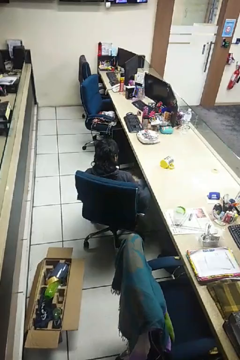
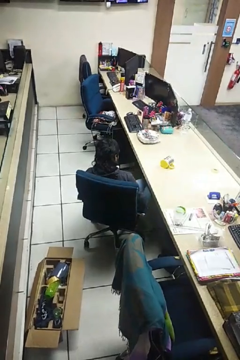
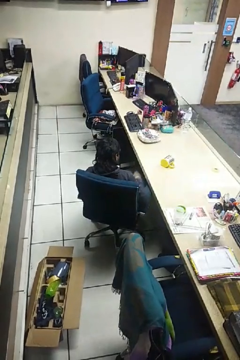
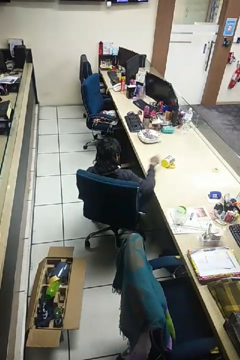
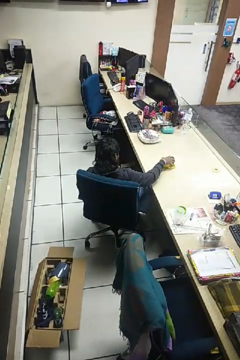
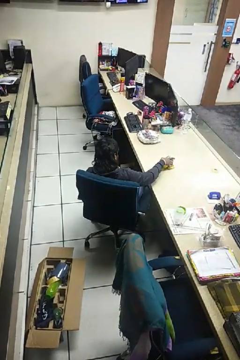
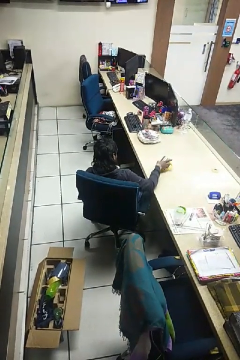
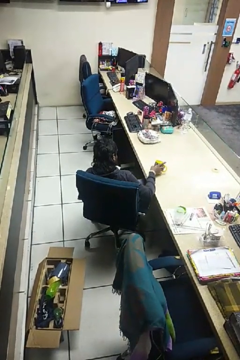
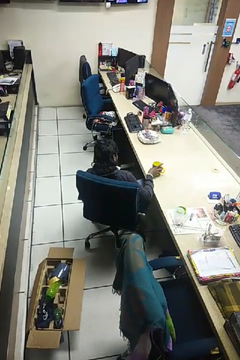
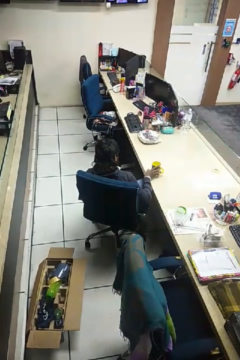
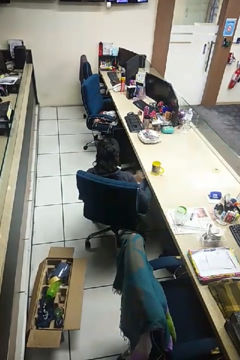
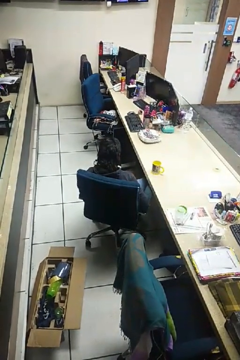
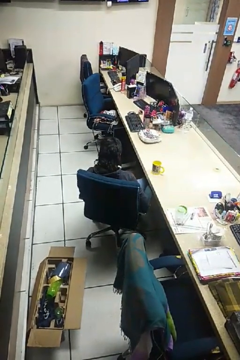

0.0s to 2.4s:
person sets upright glass

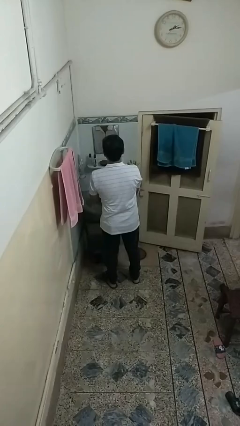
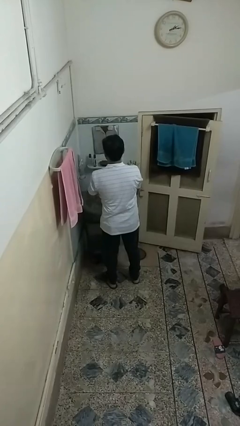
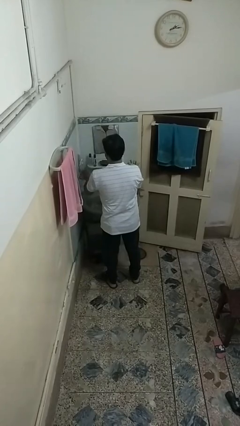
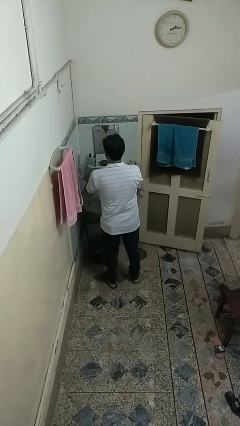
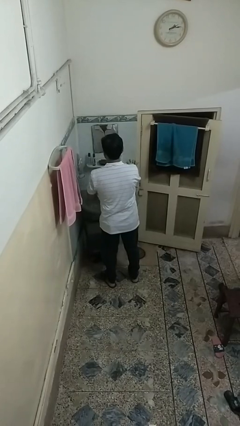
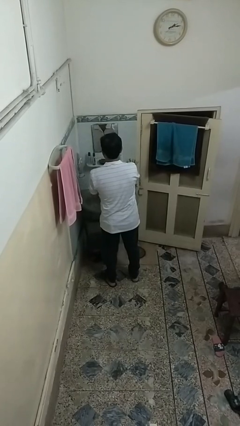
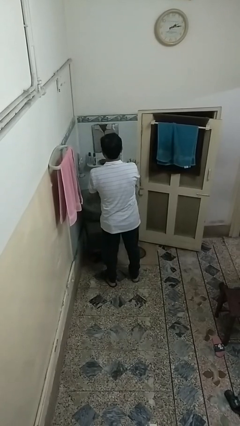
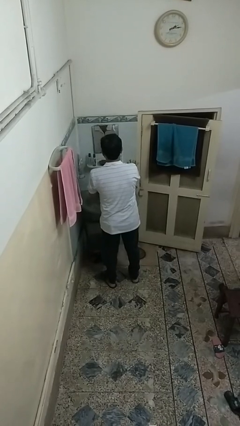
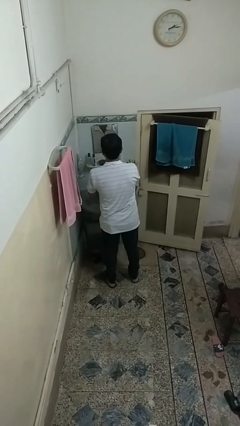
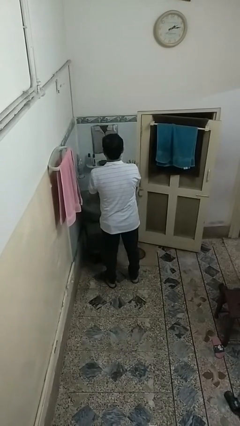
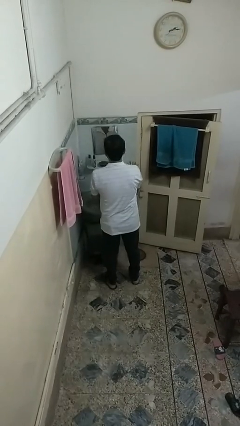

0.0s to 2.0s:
person washes hands

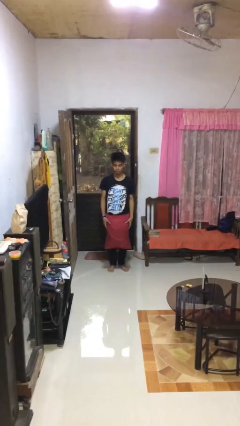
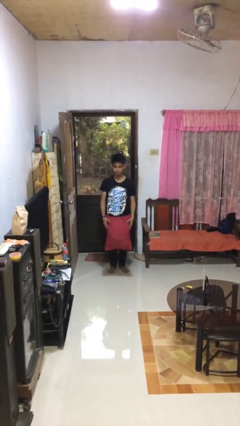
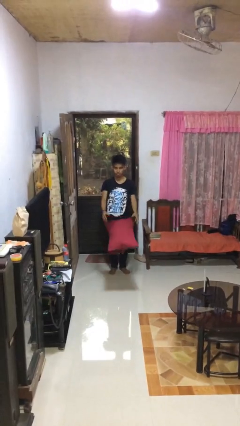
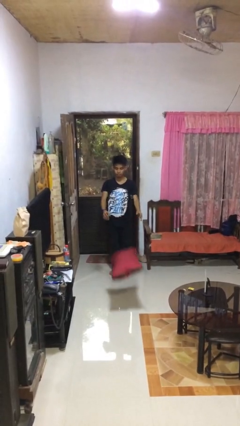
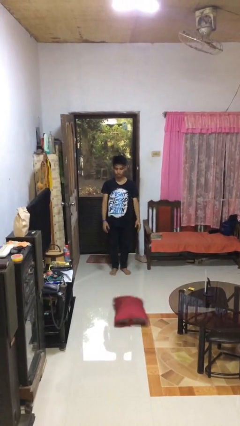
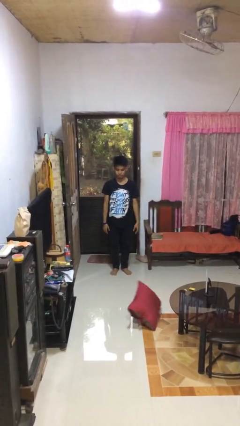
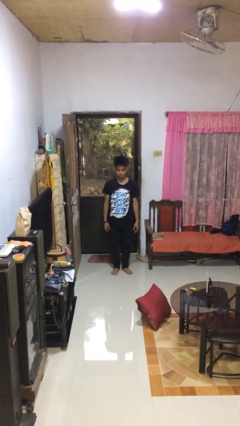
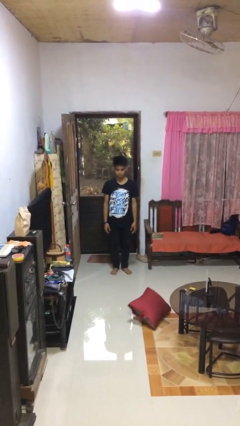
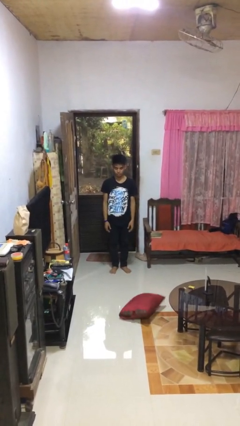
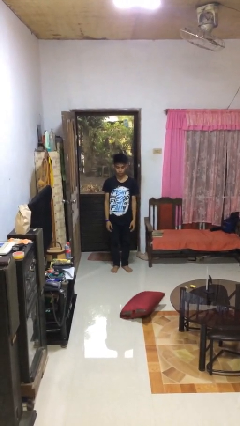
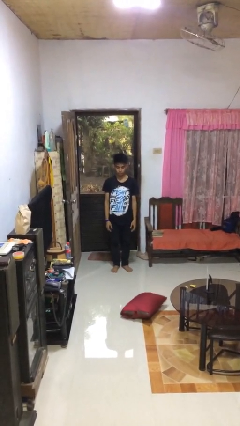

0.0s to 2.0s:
person throws object to ground

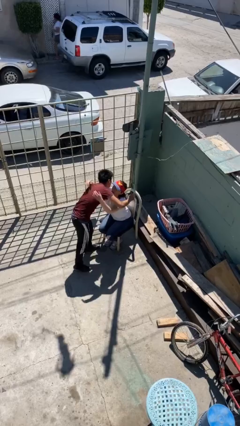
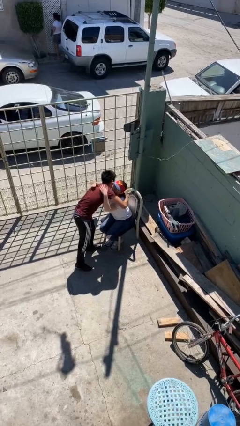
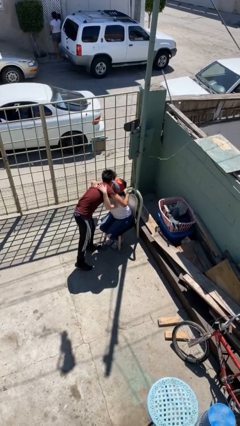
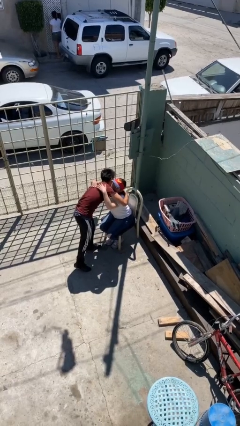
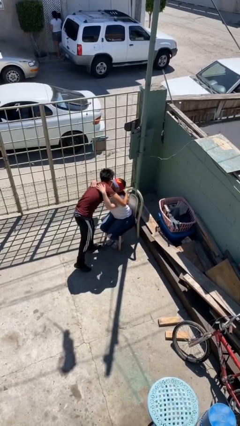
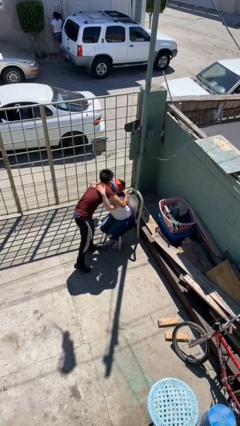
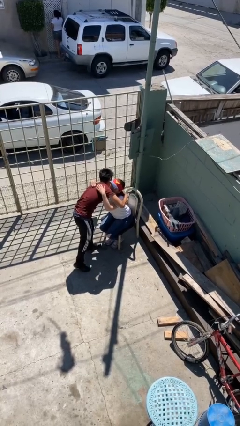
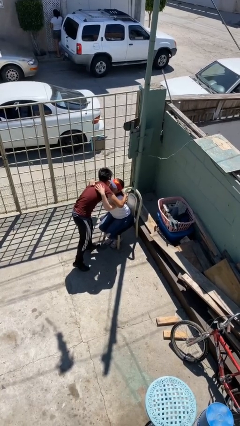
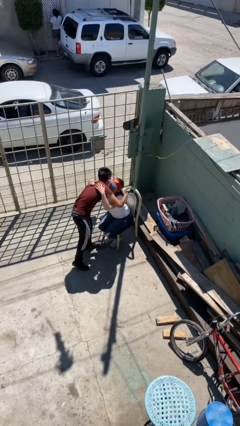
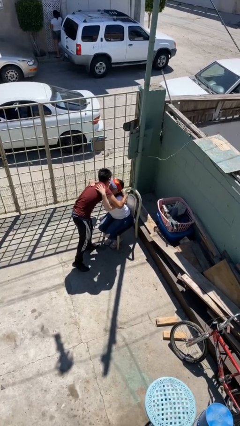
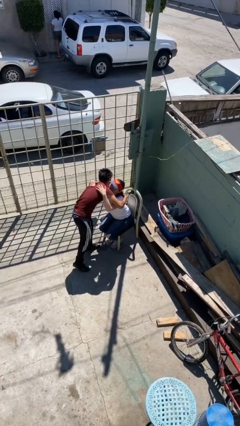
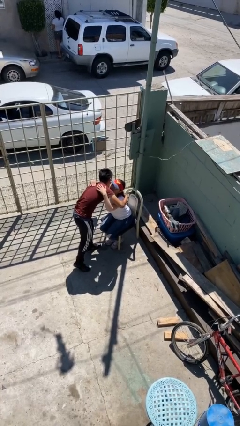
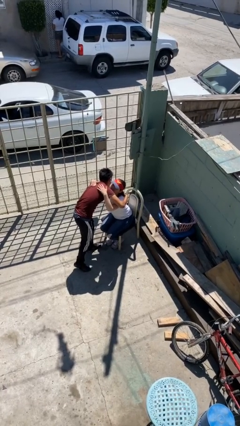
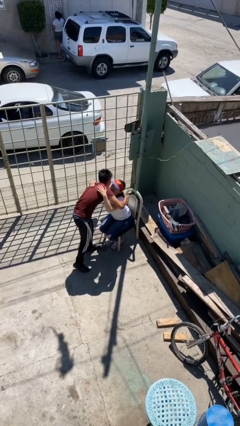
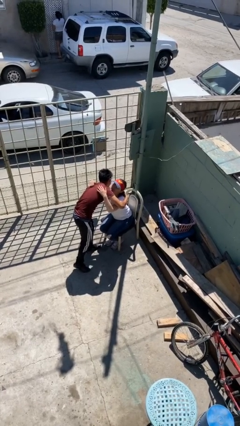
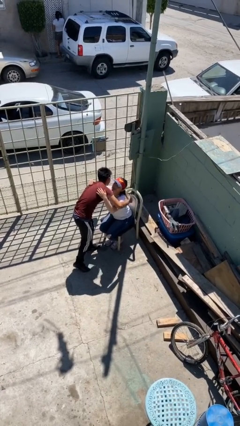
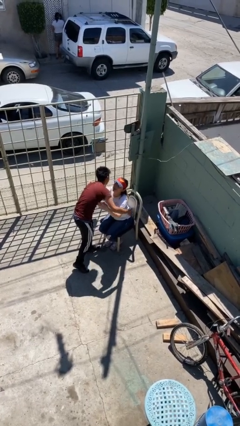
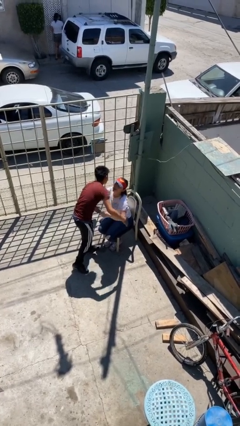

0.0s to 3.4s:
person embraces person

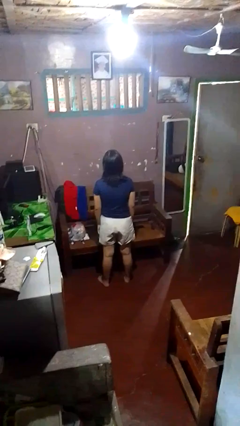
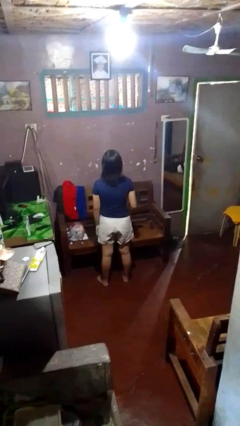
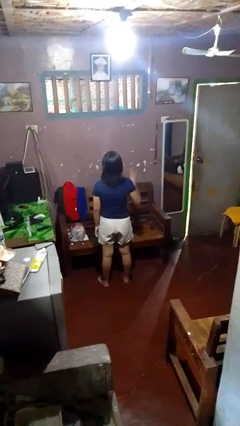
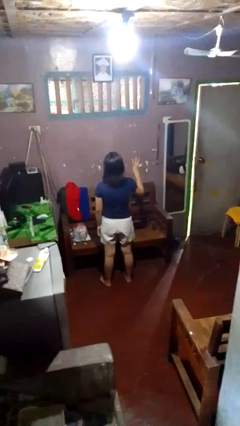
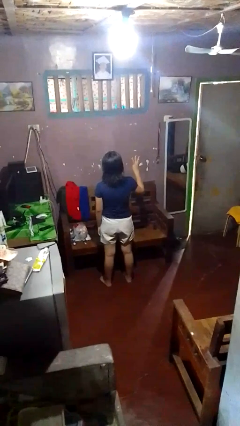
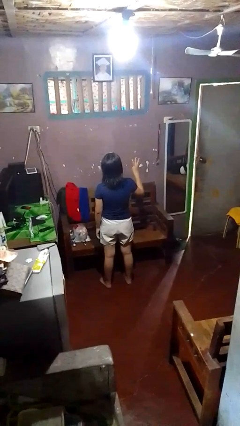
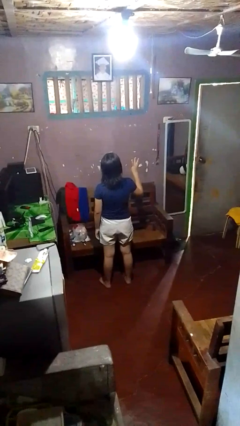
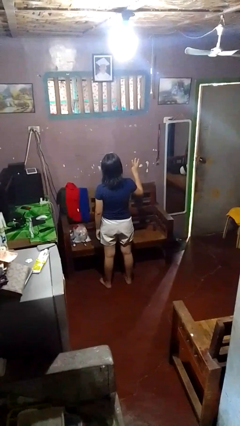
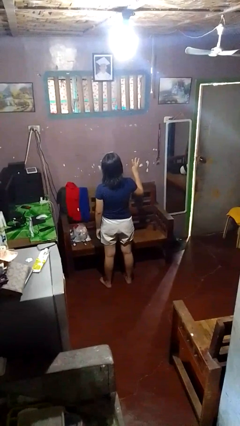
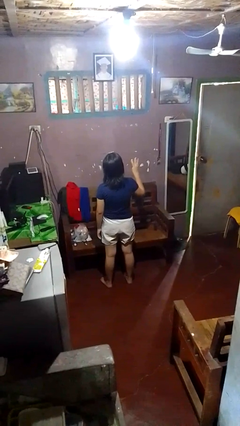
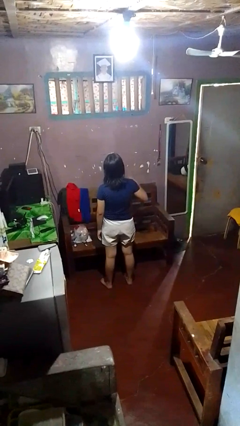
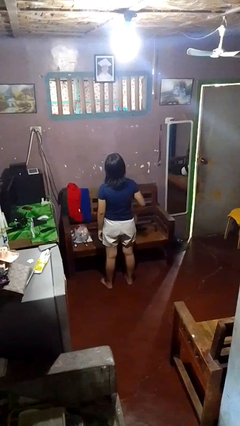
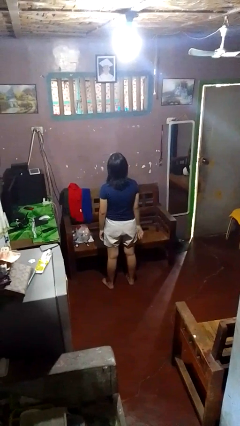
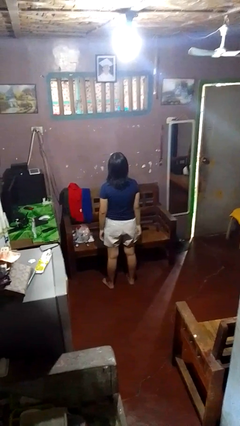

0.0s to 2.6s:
person gestures number three

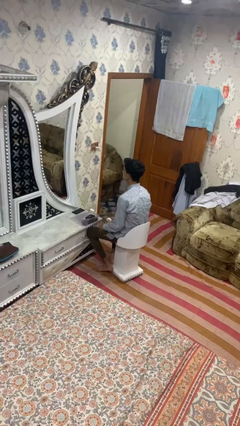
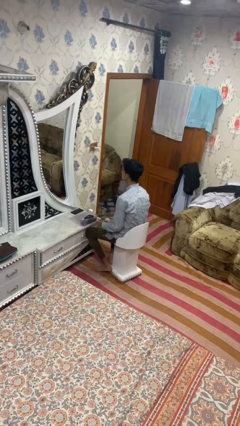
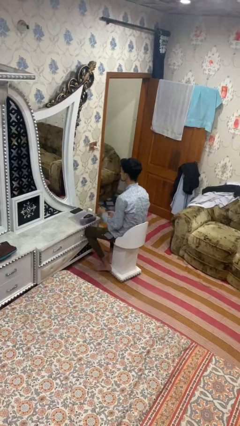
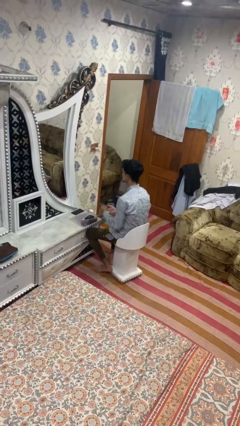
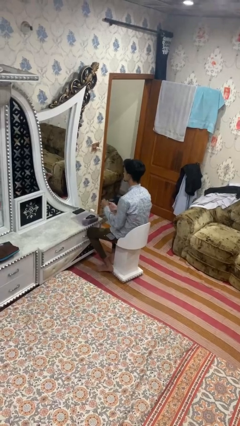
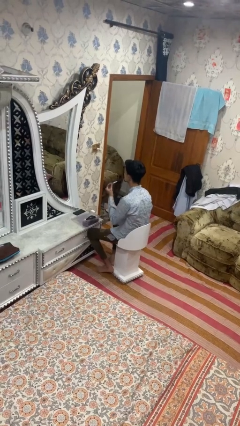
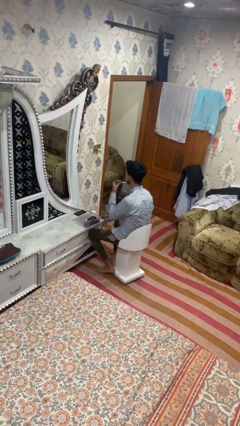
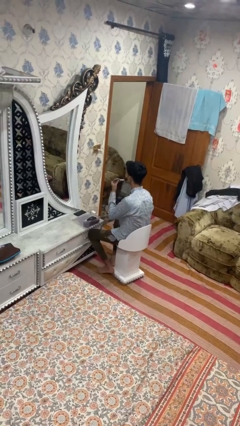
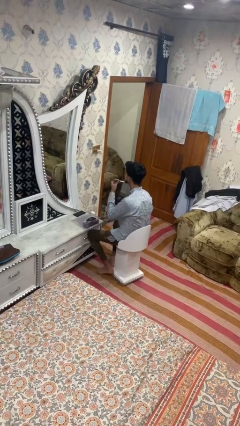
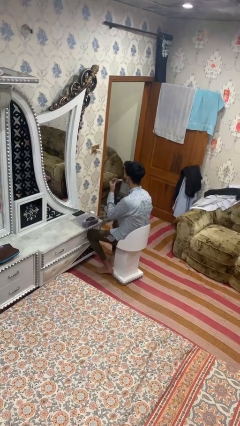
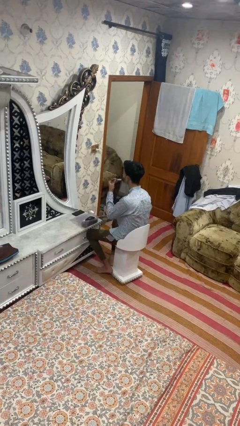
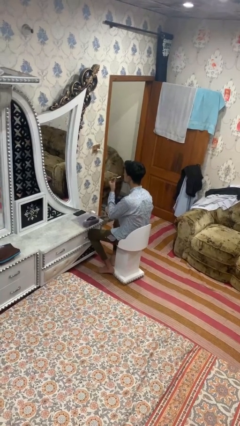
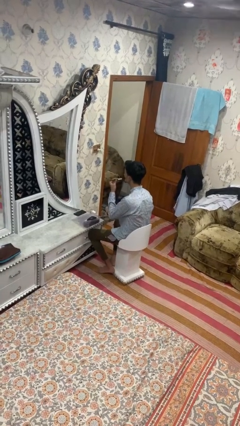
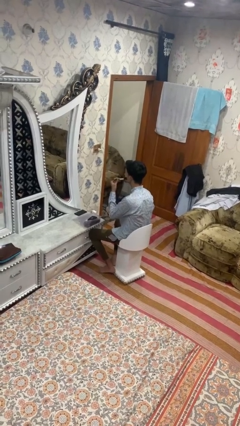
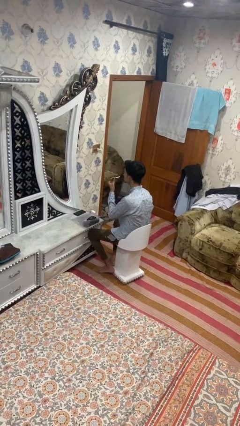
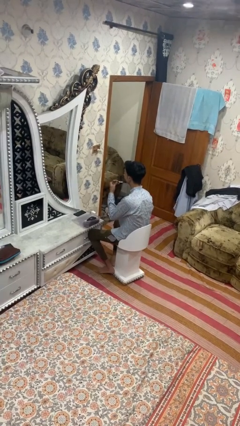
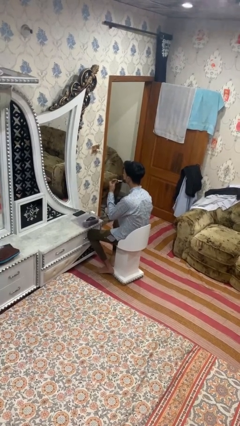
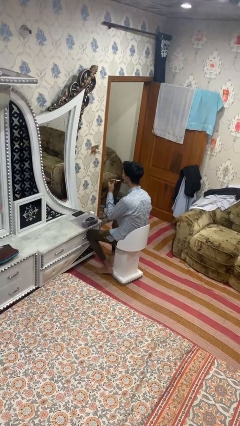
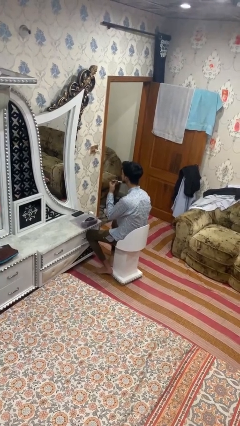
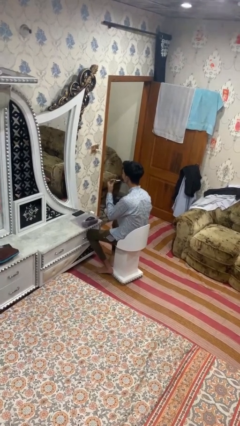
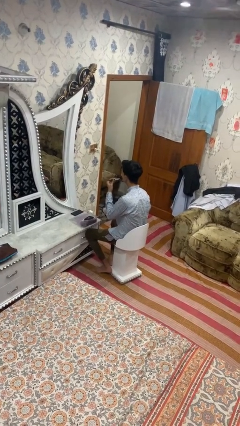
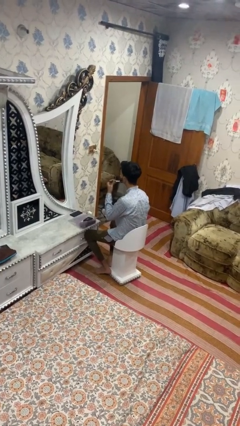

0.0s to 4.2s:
person applies foundation makeup

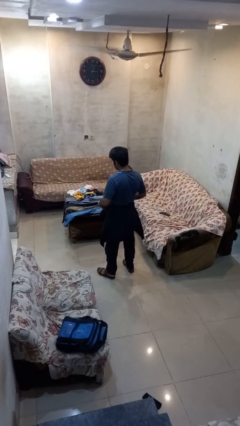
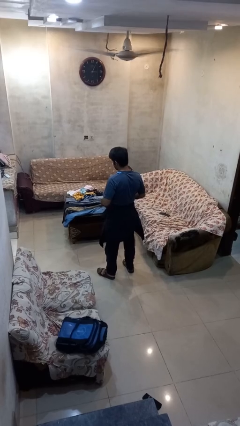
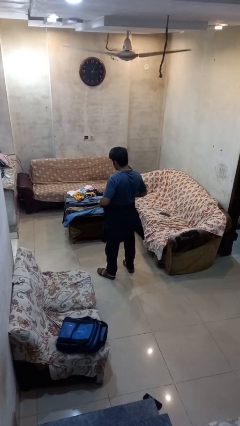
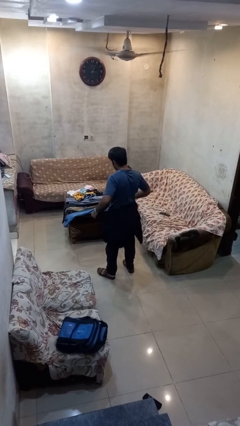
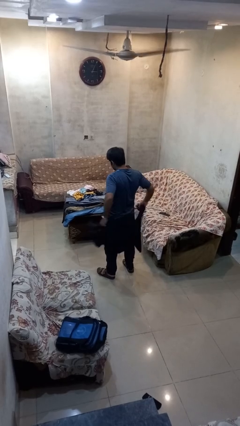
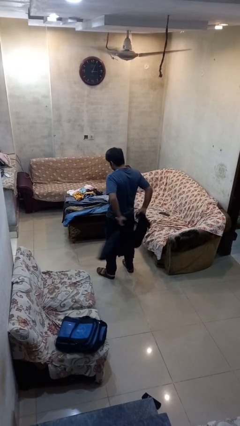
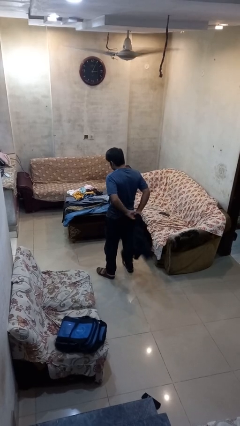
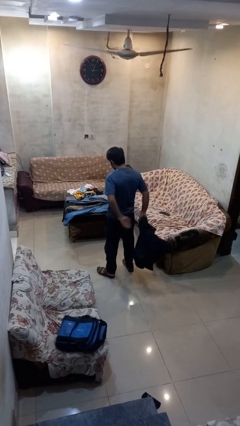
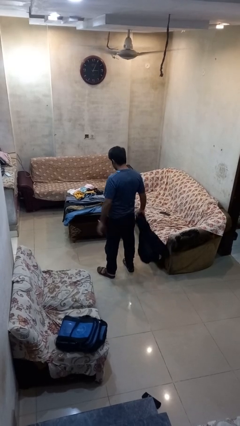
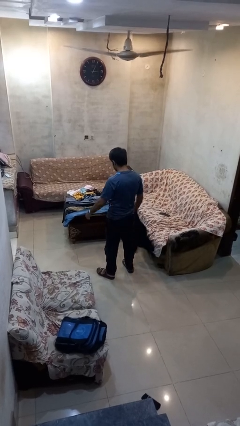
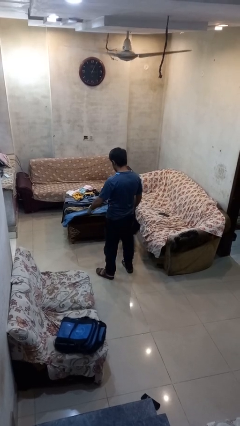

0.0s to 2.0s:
person unties jacket around waist
